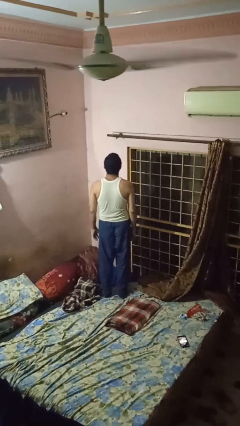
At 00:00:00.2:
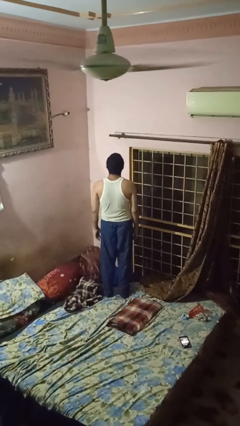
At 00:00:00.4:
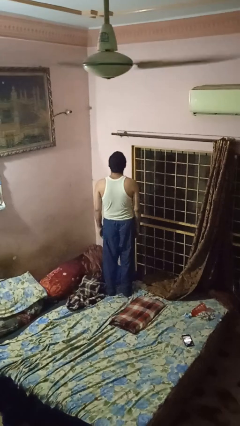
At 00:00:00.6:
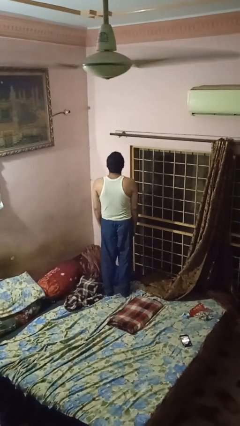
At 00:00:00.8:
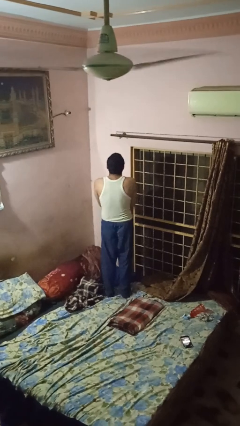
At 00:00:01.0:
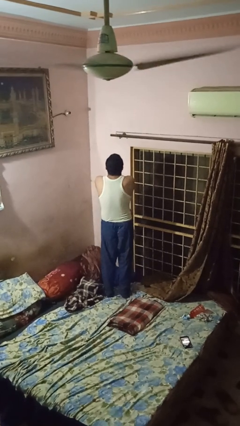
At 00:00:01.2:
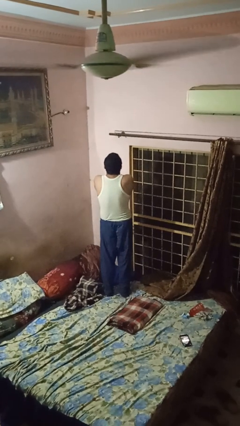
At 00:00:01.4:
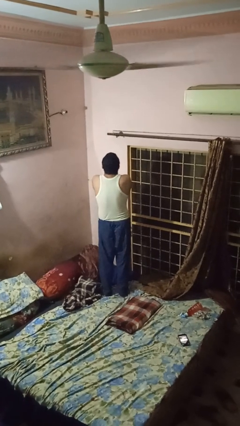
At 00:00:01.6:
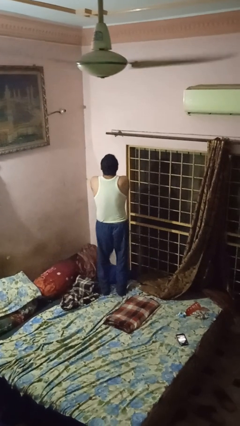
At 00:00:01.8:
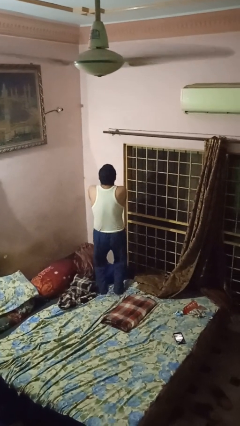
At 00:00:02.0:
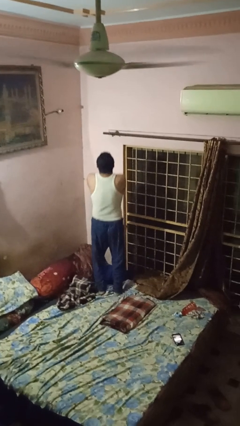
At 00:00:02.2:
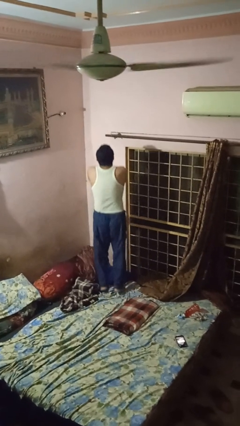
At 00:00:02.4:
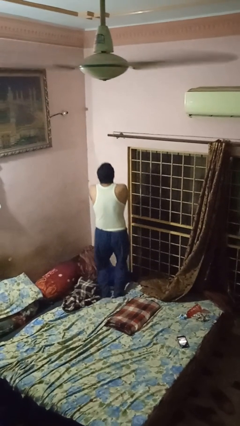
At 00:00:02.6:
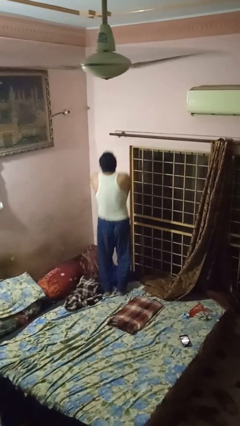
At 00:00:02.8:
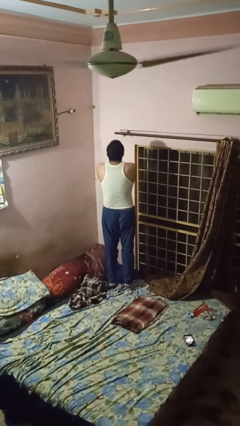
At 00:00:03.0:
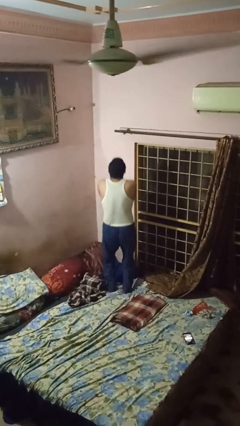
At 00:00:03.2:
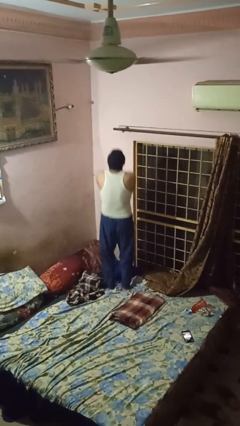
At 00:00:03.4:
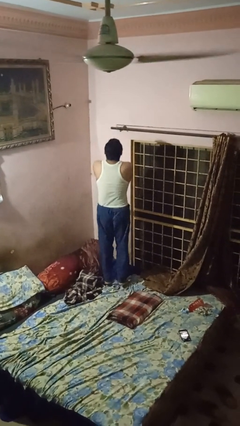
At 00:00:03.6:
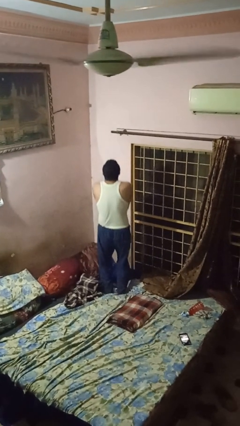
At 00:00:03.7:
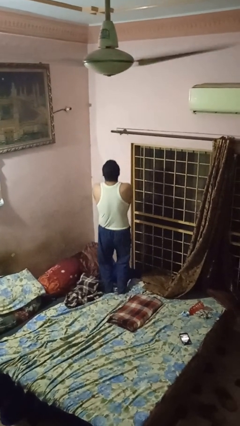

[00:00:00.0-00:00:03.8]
person jumps on bed

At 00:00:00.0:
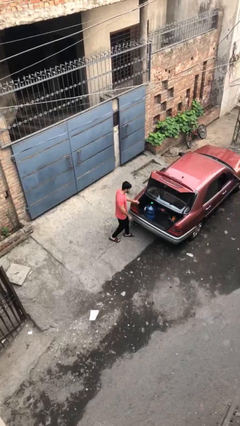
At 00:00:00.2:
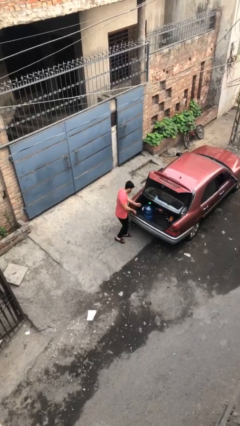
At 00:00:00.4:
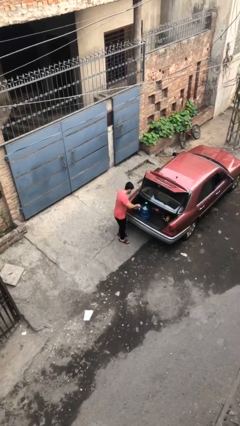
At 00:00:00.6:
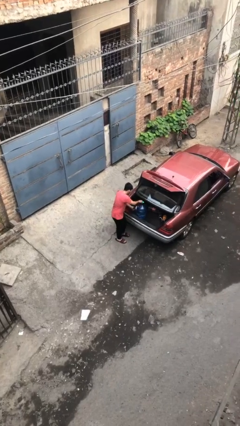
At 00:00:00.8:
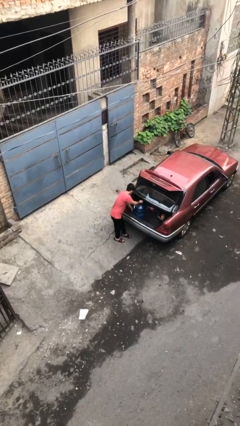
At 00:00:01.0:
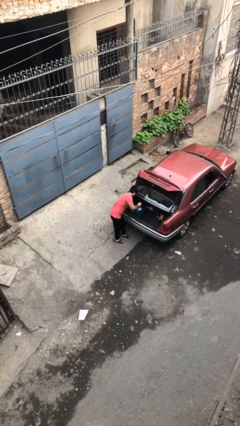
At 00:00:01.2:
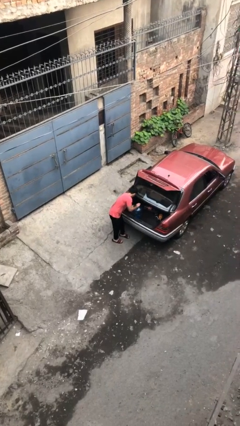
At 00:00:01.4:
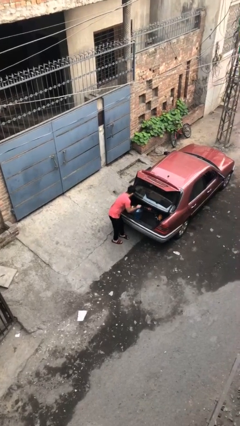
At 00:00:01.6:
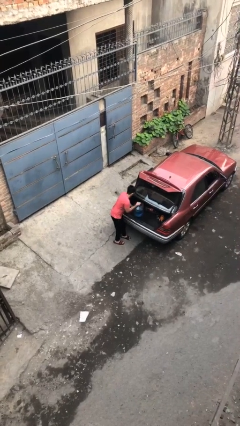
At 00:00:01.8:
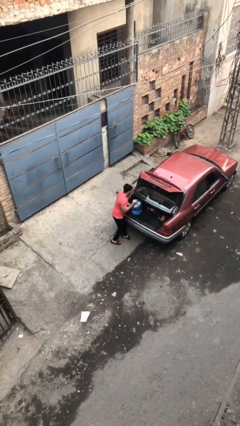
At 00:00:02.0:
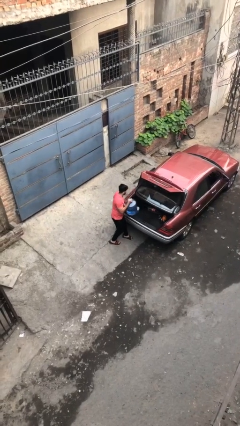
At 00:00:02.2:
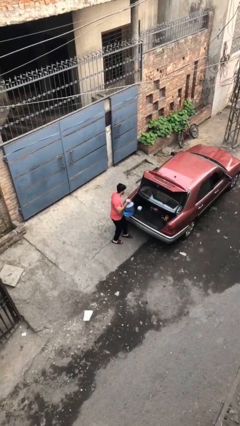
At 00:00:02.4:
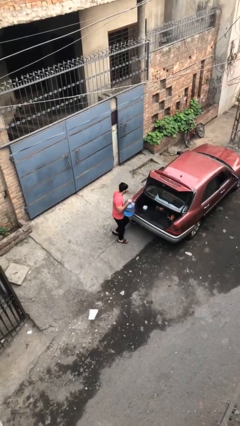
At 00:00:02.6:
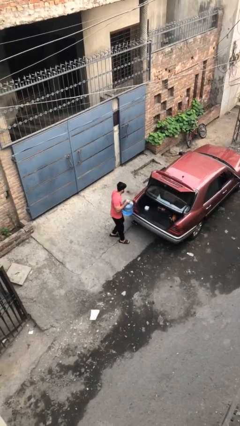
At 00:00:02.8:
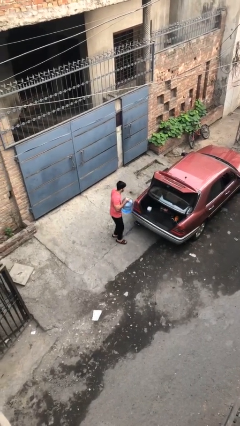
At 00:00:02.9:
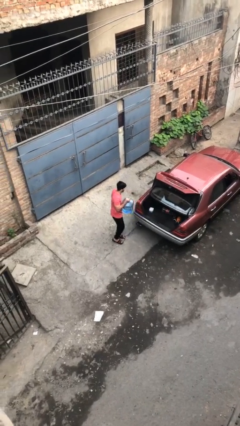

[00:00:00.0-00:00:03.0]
person unloads car

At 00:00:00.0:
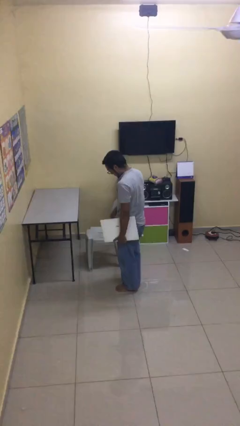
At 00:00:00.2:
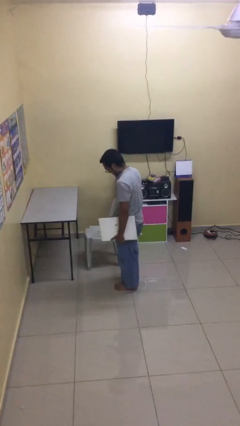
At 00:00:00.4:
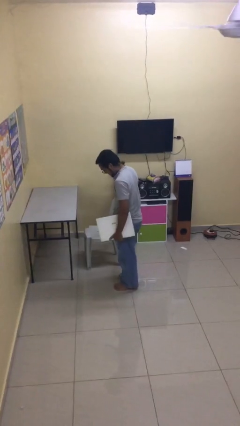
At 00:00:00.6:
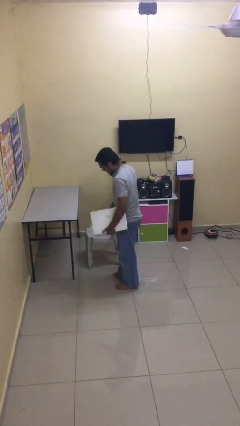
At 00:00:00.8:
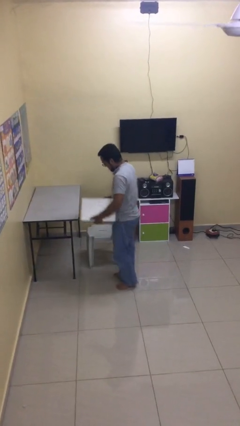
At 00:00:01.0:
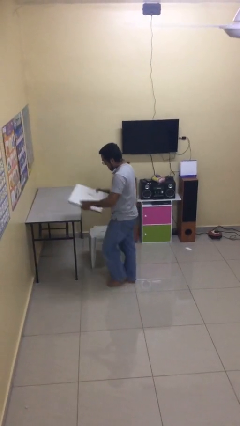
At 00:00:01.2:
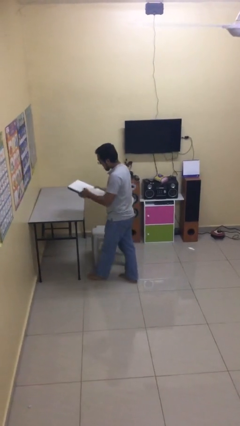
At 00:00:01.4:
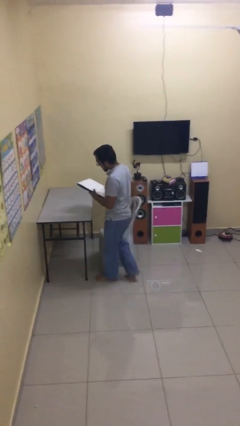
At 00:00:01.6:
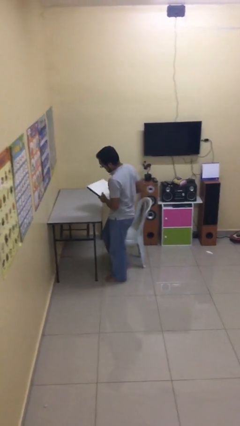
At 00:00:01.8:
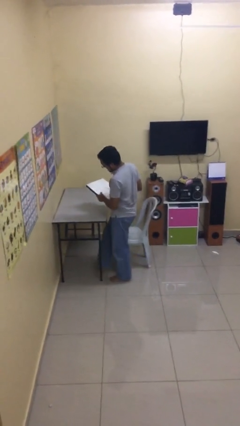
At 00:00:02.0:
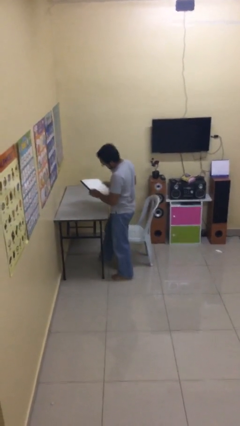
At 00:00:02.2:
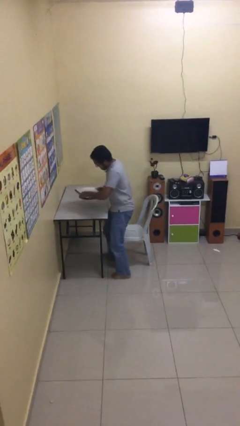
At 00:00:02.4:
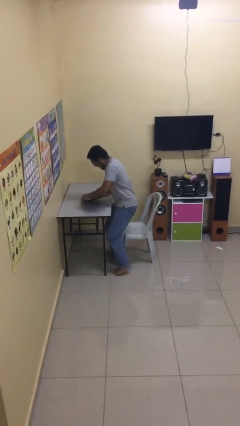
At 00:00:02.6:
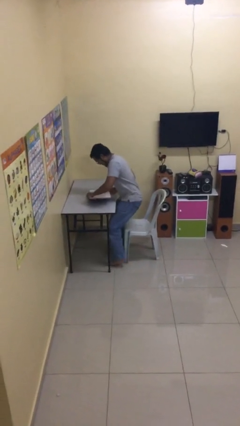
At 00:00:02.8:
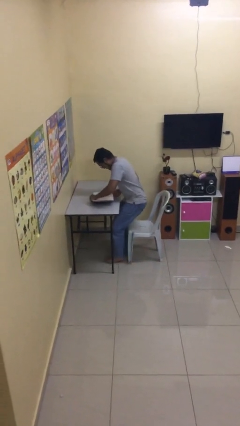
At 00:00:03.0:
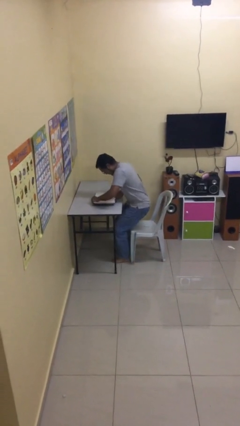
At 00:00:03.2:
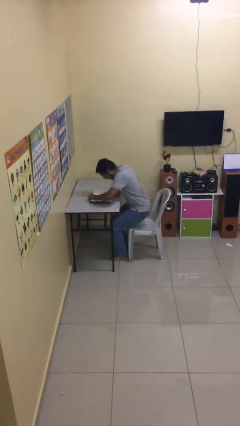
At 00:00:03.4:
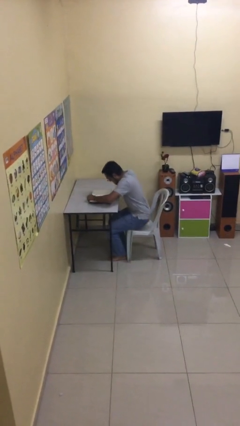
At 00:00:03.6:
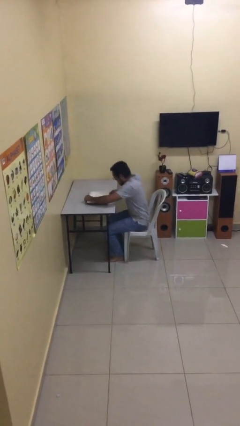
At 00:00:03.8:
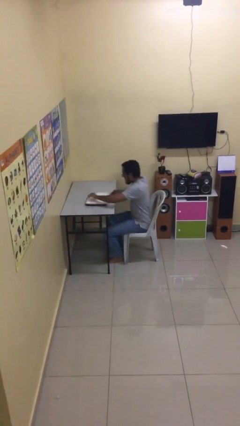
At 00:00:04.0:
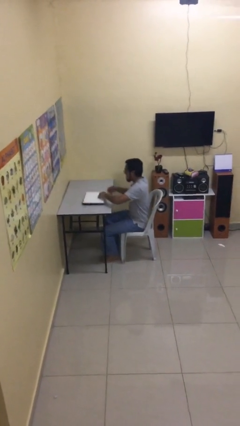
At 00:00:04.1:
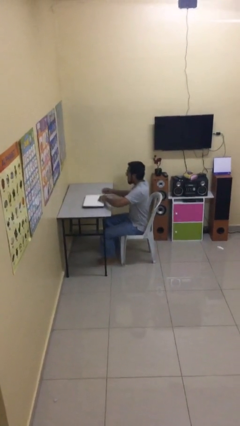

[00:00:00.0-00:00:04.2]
person sits down

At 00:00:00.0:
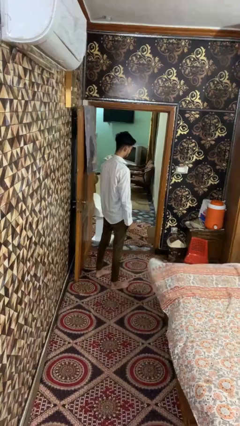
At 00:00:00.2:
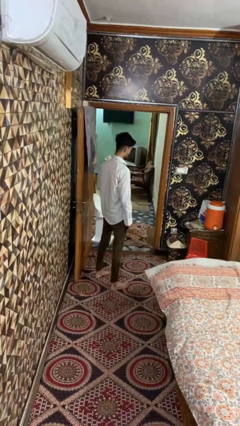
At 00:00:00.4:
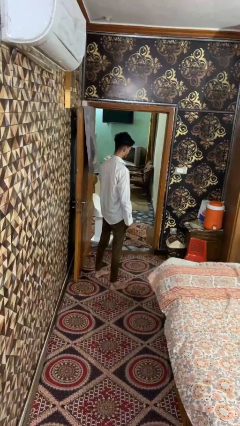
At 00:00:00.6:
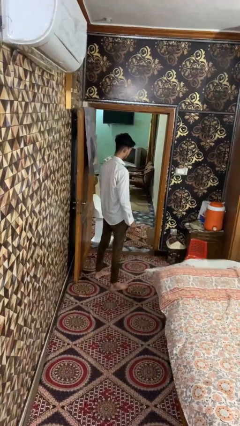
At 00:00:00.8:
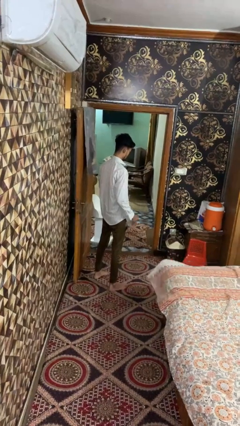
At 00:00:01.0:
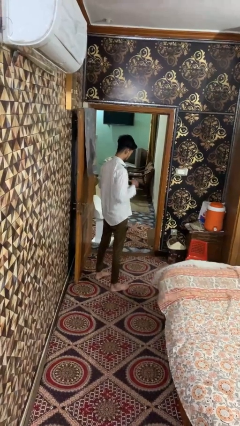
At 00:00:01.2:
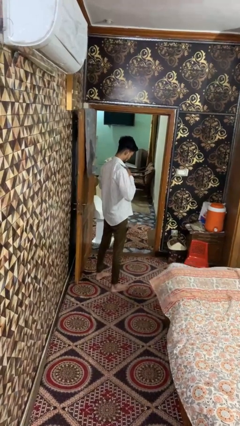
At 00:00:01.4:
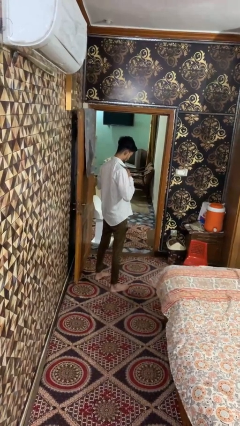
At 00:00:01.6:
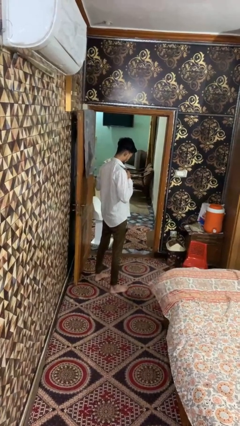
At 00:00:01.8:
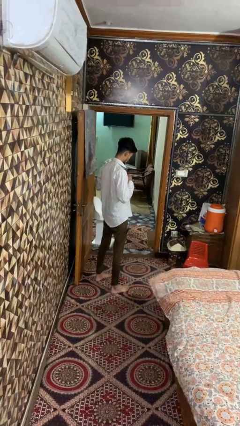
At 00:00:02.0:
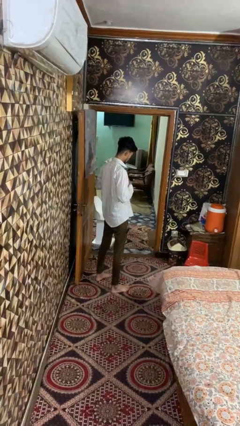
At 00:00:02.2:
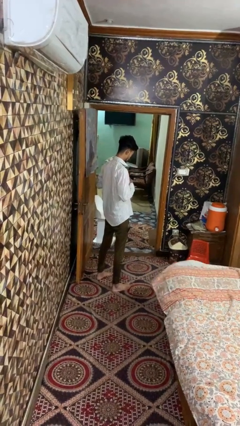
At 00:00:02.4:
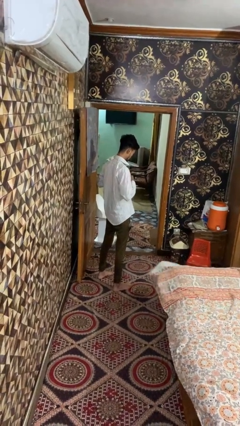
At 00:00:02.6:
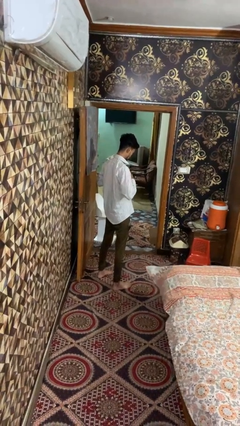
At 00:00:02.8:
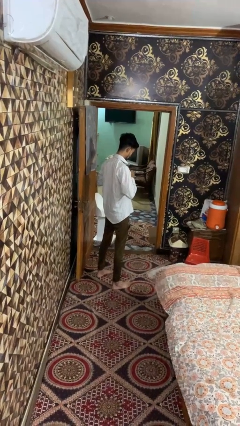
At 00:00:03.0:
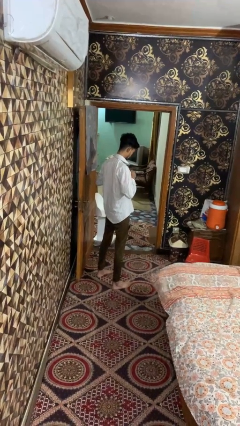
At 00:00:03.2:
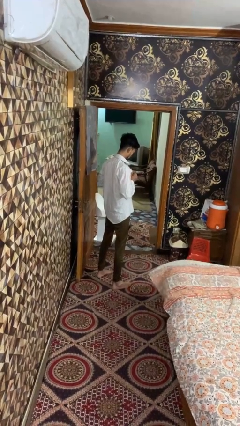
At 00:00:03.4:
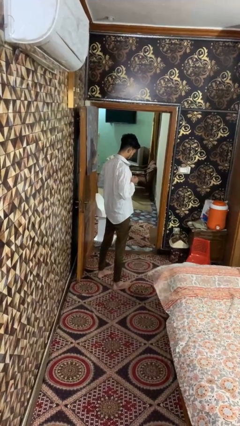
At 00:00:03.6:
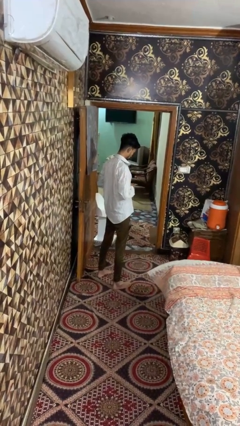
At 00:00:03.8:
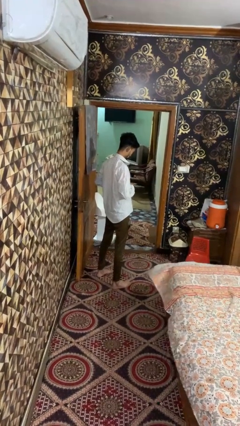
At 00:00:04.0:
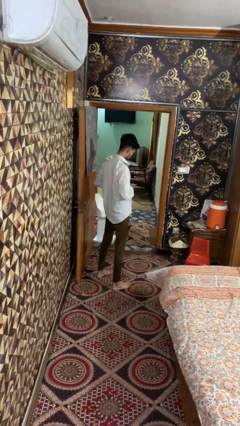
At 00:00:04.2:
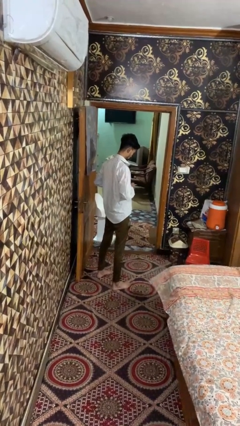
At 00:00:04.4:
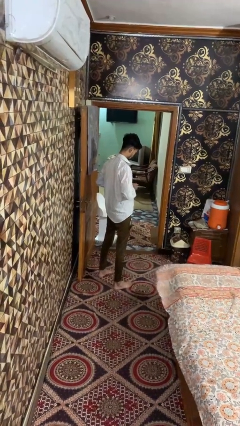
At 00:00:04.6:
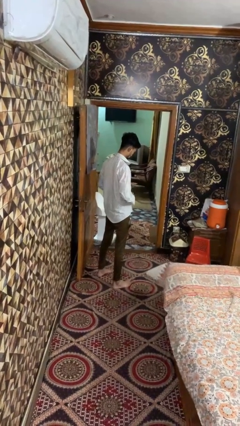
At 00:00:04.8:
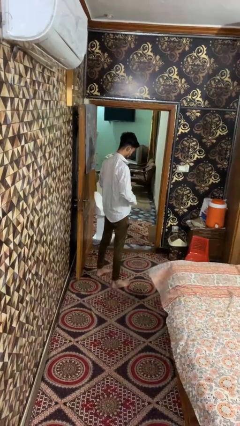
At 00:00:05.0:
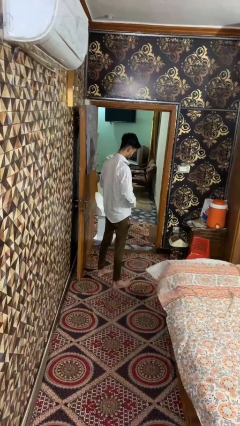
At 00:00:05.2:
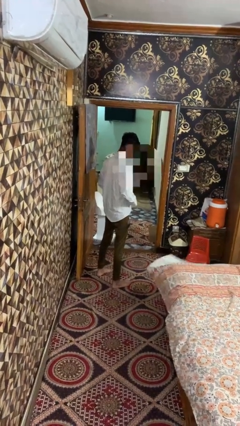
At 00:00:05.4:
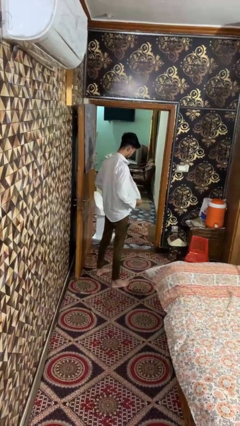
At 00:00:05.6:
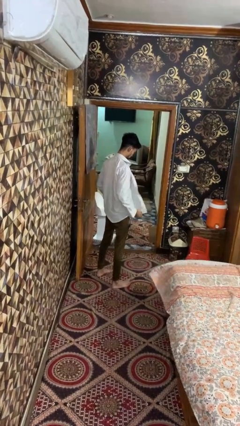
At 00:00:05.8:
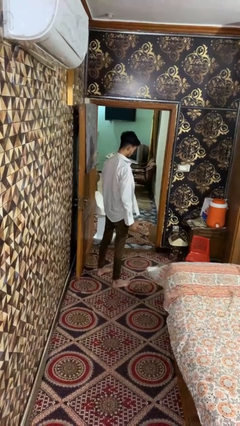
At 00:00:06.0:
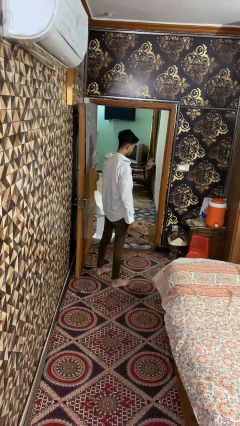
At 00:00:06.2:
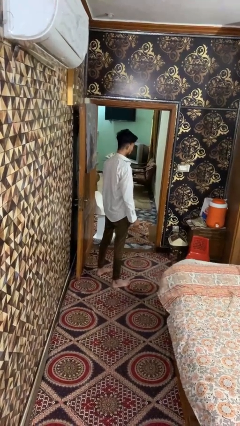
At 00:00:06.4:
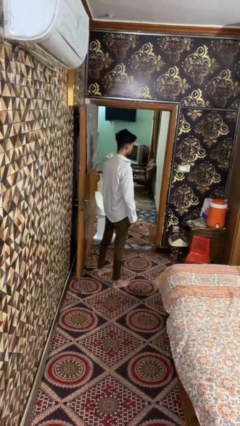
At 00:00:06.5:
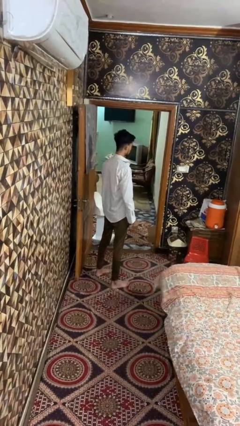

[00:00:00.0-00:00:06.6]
person unbuttons shirt
